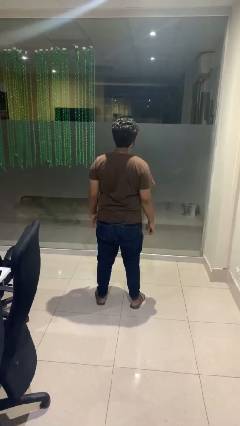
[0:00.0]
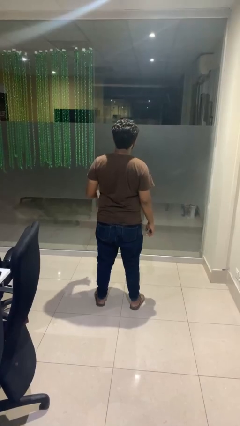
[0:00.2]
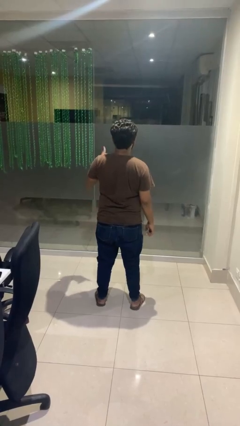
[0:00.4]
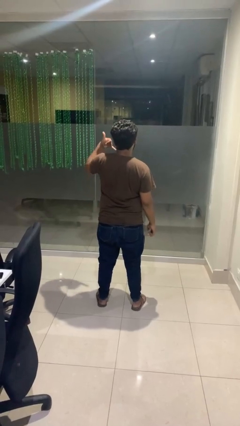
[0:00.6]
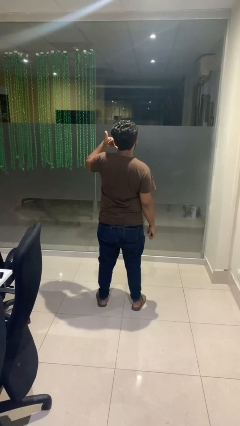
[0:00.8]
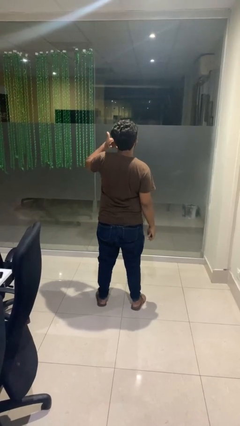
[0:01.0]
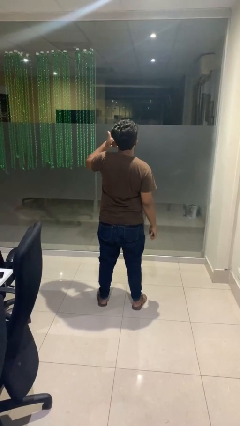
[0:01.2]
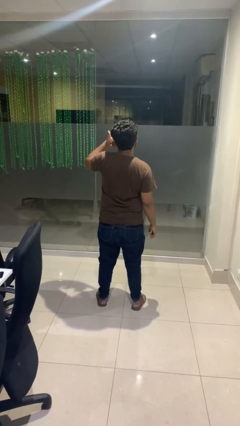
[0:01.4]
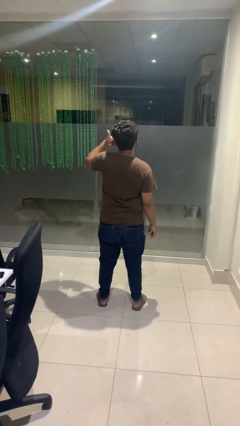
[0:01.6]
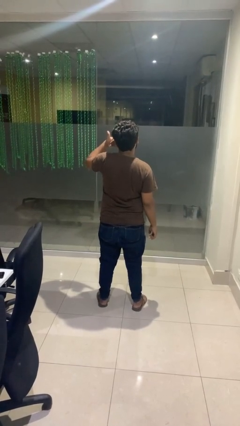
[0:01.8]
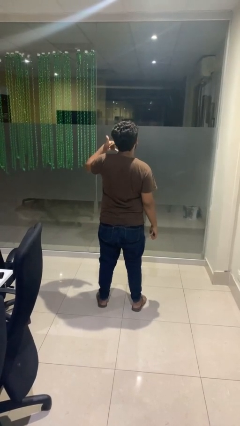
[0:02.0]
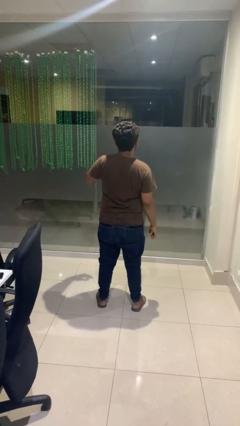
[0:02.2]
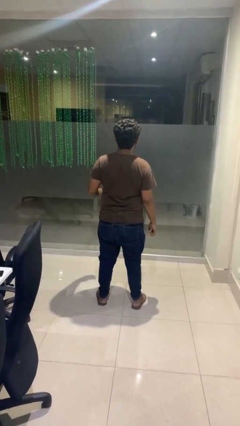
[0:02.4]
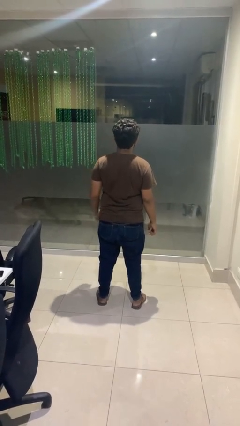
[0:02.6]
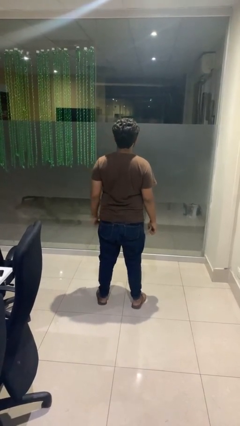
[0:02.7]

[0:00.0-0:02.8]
person gestures call me

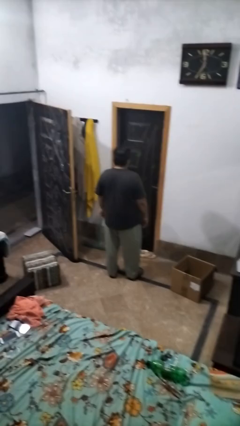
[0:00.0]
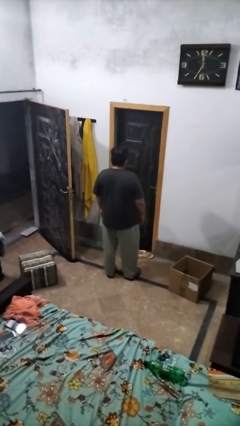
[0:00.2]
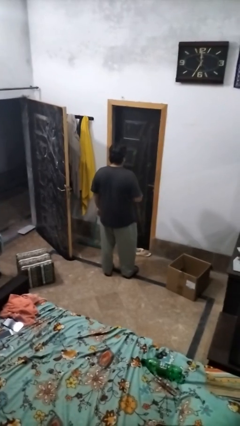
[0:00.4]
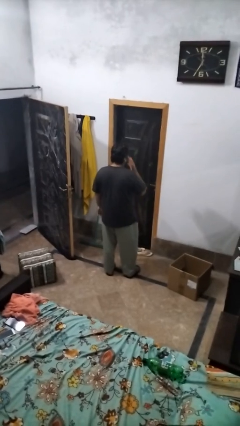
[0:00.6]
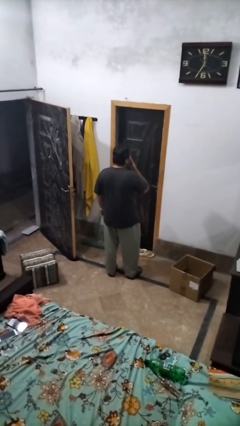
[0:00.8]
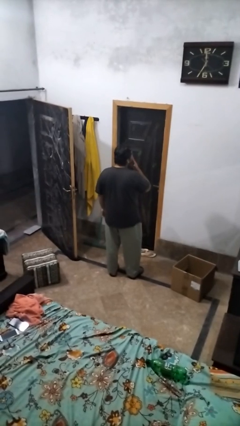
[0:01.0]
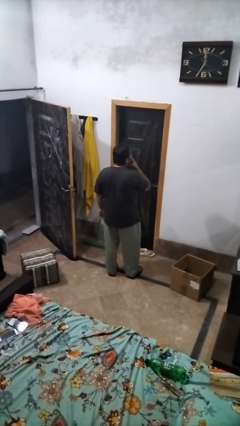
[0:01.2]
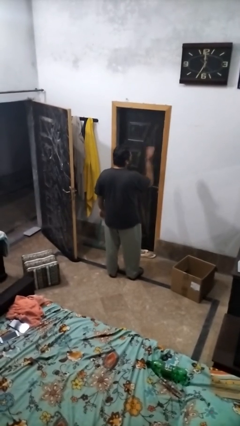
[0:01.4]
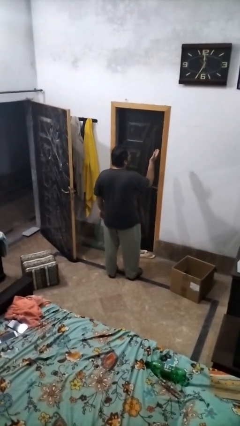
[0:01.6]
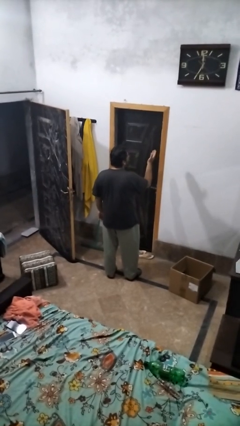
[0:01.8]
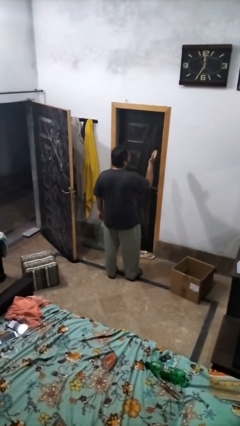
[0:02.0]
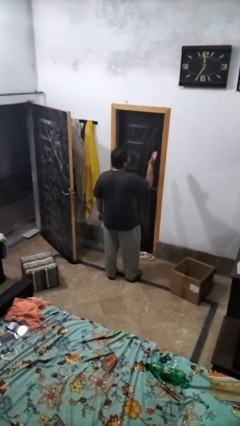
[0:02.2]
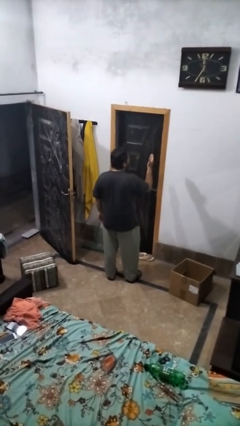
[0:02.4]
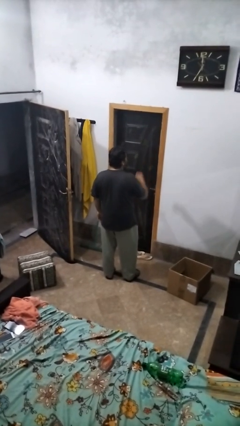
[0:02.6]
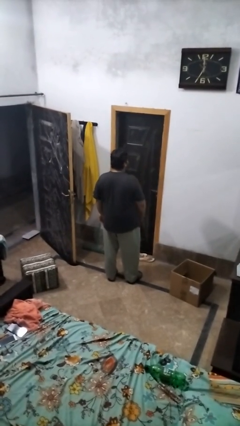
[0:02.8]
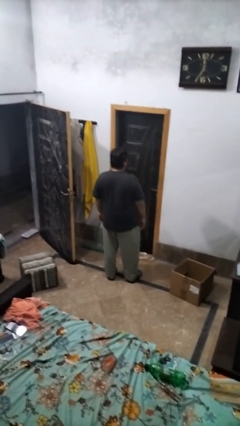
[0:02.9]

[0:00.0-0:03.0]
person gestures blow kiss

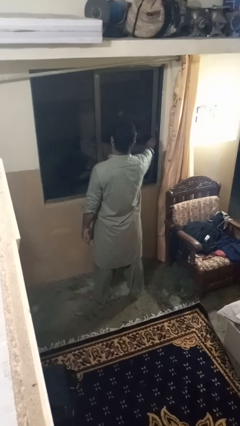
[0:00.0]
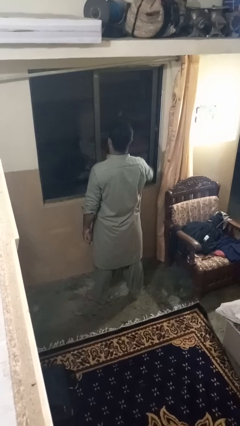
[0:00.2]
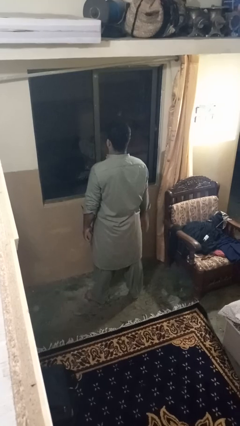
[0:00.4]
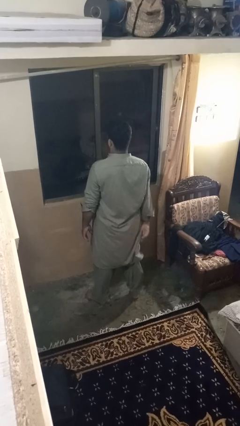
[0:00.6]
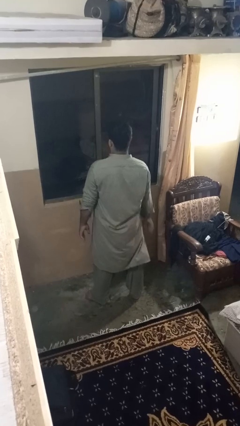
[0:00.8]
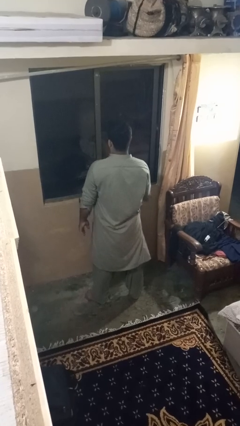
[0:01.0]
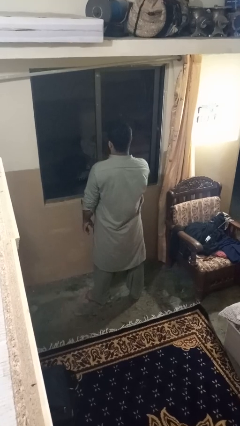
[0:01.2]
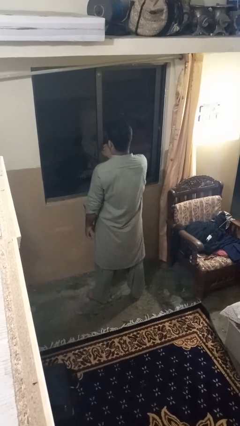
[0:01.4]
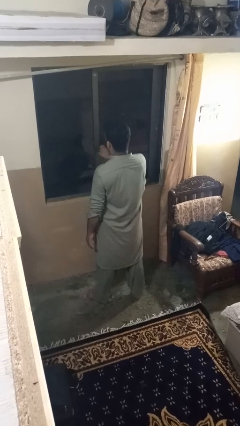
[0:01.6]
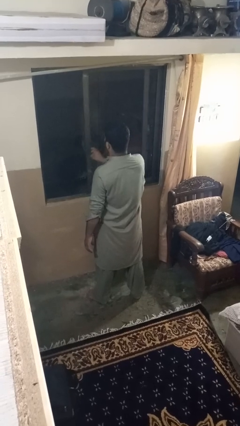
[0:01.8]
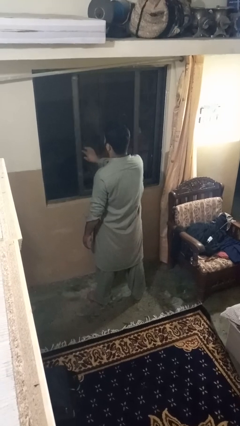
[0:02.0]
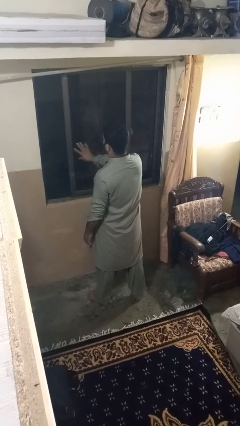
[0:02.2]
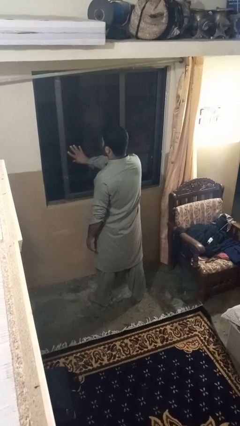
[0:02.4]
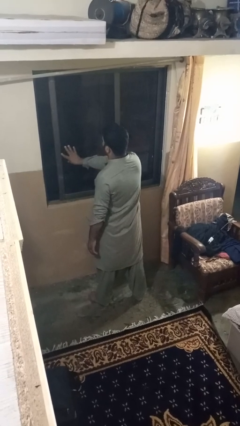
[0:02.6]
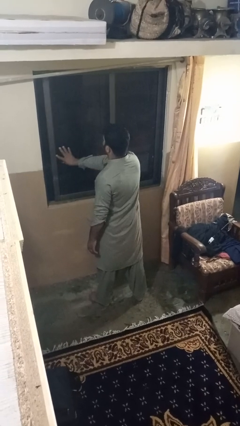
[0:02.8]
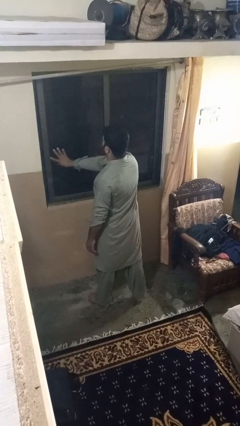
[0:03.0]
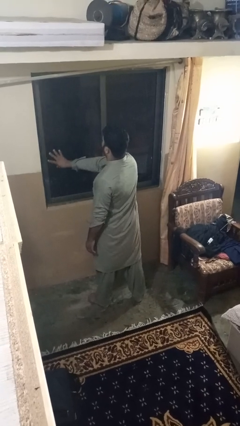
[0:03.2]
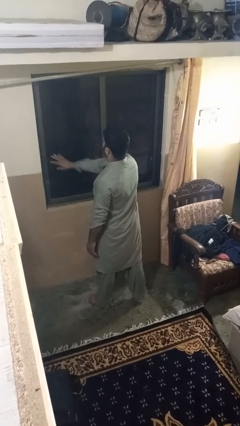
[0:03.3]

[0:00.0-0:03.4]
person closes home window

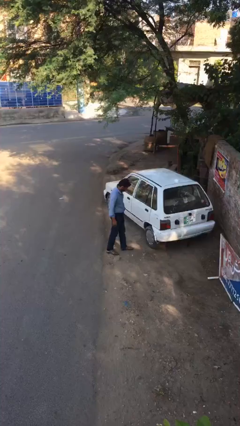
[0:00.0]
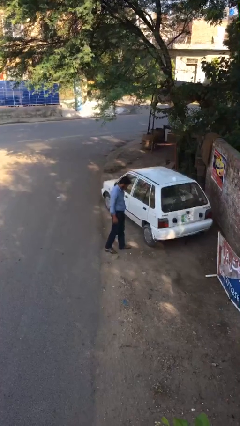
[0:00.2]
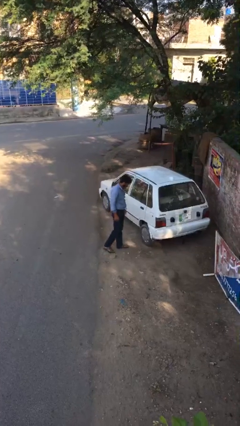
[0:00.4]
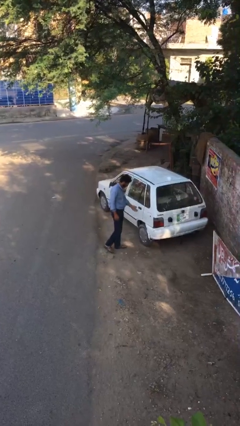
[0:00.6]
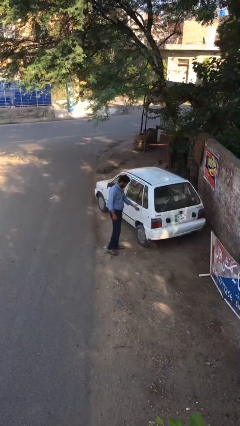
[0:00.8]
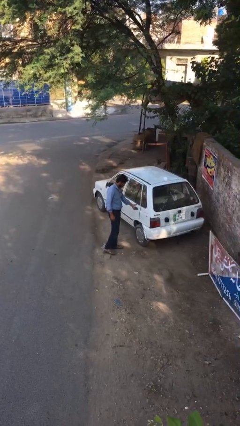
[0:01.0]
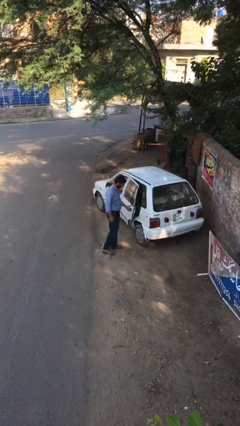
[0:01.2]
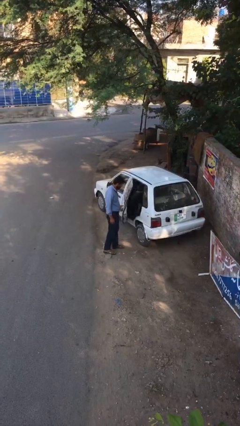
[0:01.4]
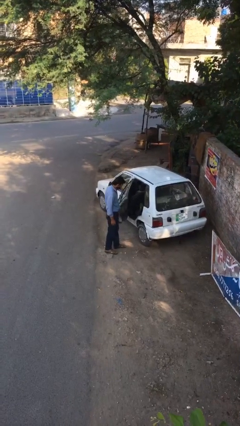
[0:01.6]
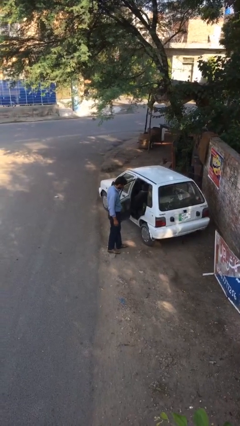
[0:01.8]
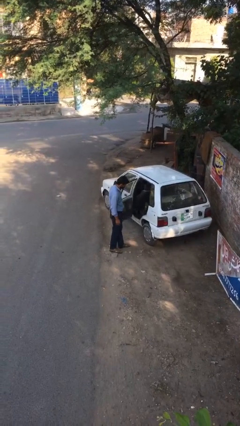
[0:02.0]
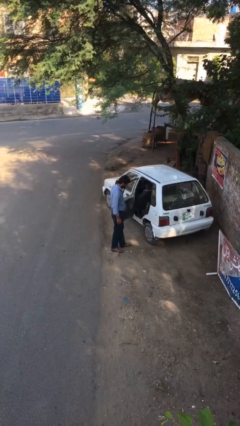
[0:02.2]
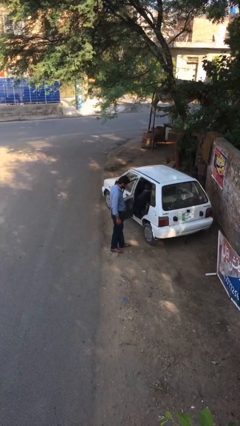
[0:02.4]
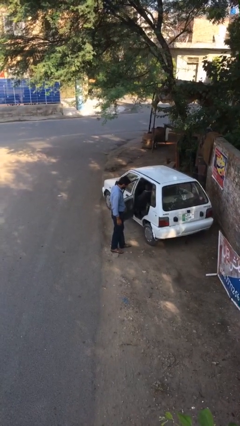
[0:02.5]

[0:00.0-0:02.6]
person opens car door

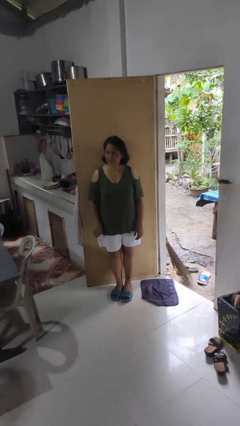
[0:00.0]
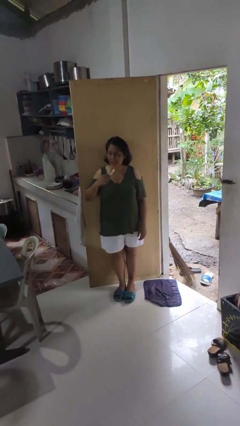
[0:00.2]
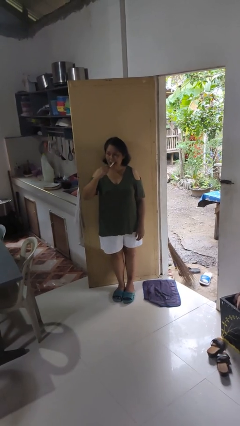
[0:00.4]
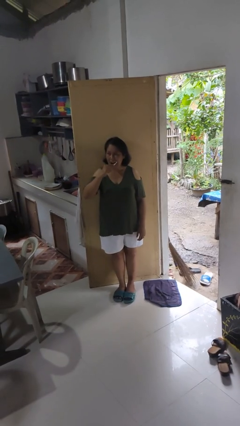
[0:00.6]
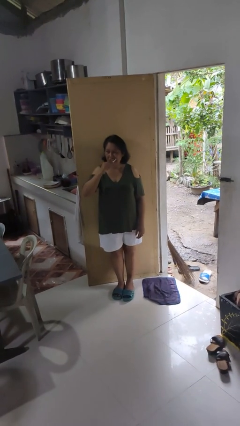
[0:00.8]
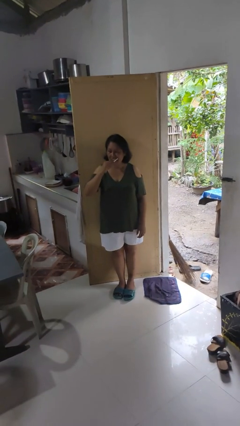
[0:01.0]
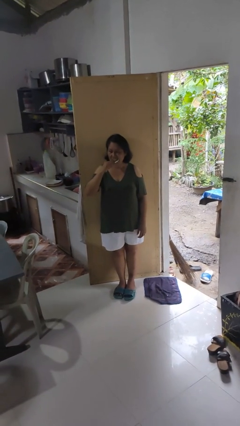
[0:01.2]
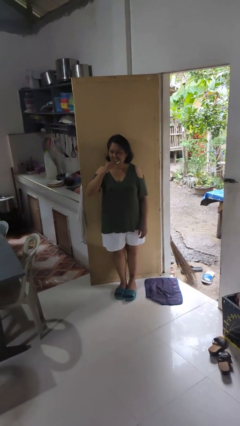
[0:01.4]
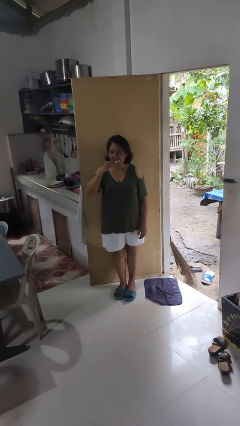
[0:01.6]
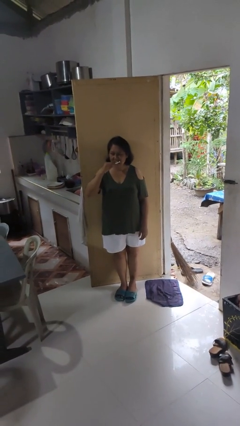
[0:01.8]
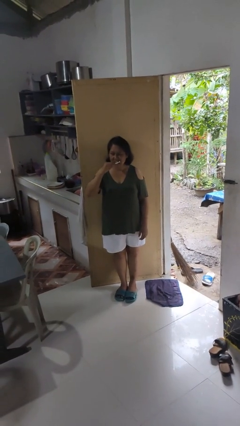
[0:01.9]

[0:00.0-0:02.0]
person brushes teeth

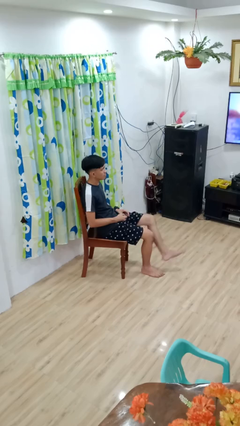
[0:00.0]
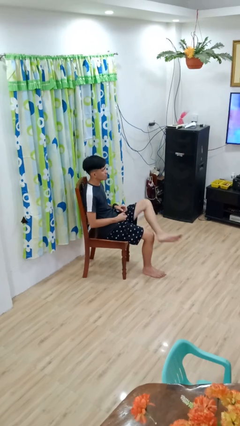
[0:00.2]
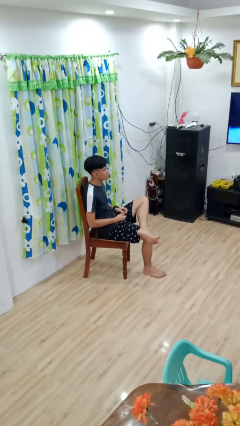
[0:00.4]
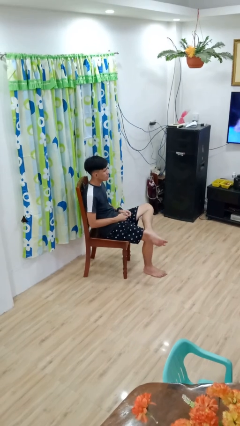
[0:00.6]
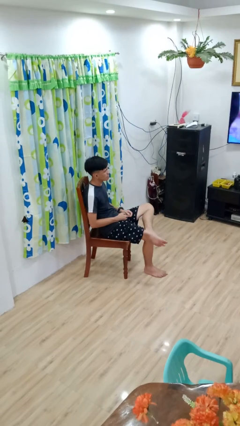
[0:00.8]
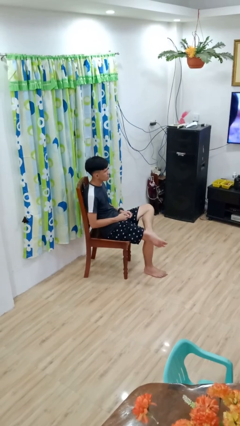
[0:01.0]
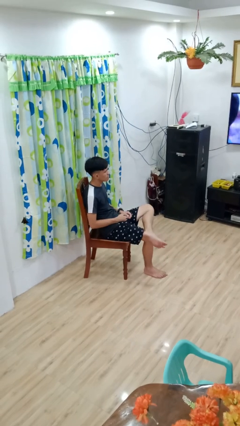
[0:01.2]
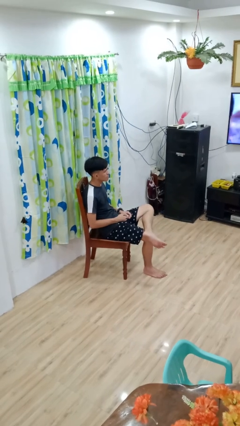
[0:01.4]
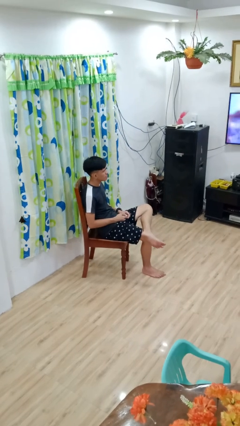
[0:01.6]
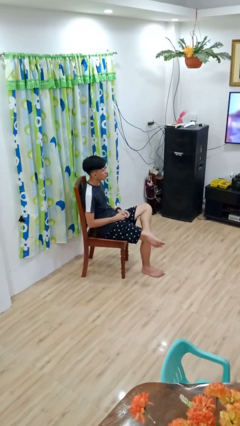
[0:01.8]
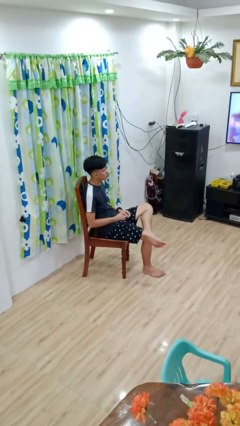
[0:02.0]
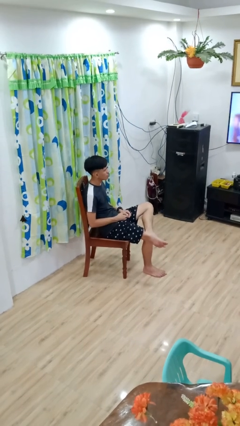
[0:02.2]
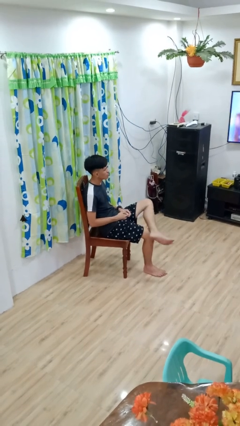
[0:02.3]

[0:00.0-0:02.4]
person crosses legs

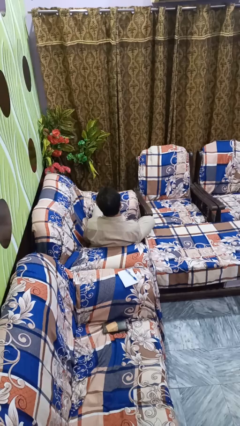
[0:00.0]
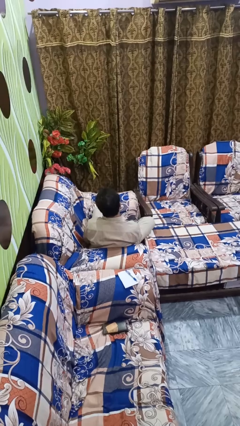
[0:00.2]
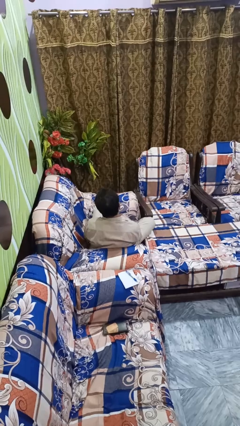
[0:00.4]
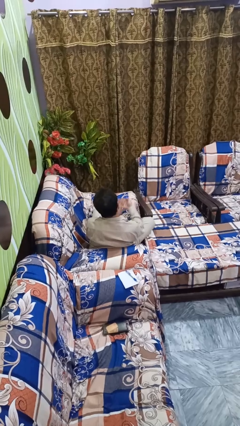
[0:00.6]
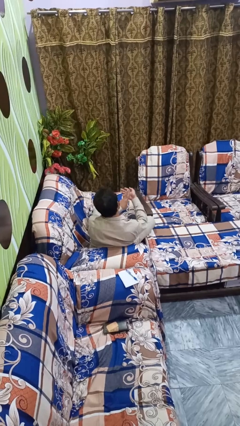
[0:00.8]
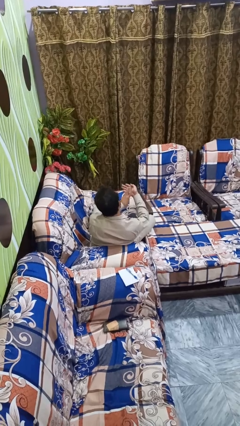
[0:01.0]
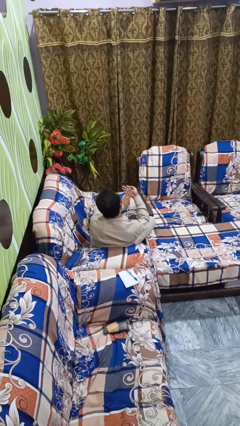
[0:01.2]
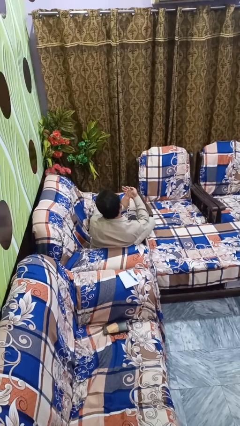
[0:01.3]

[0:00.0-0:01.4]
person gestures number three
